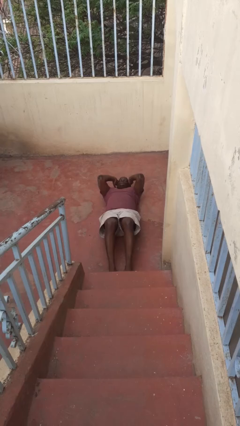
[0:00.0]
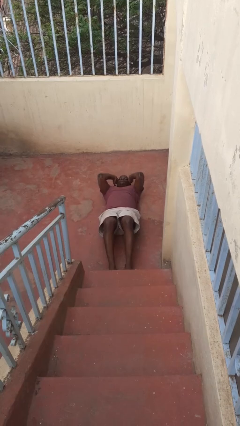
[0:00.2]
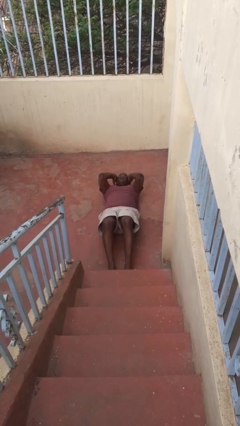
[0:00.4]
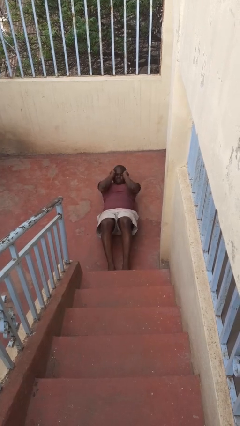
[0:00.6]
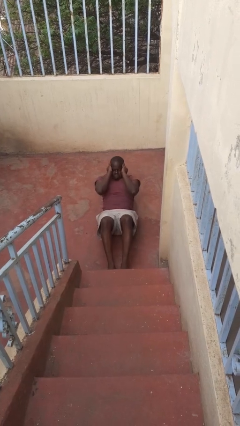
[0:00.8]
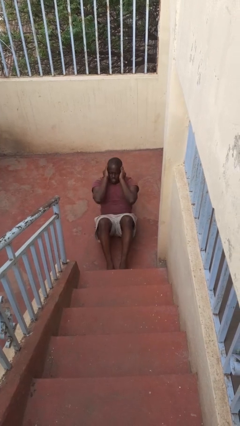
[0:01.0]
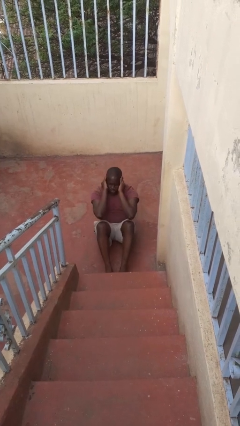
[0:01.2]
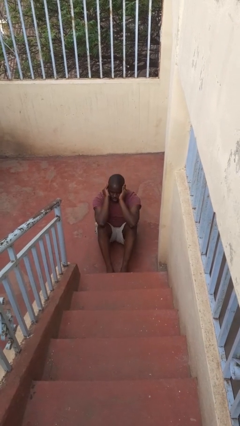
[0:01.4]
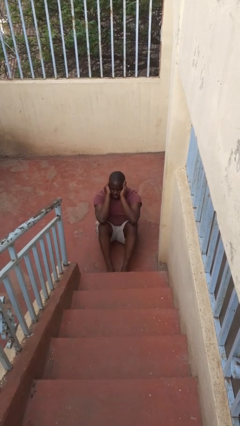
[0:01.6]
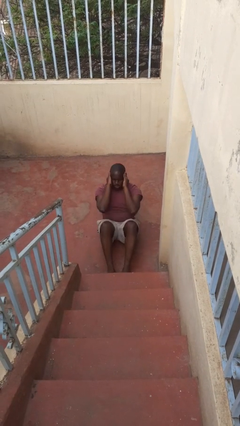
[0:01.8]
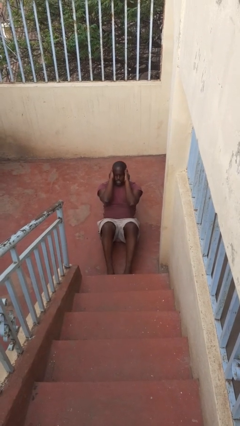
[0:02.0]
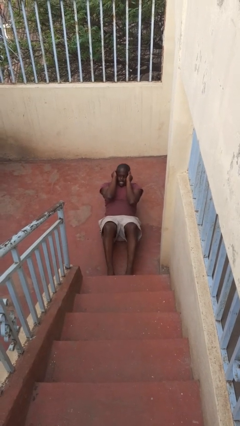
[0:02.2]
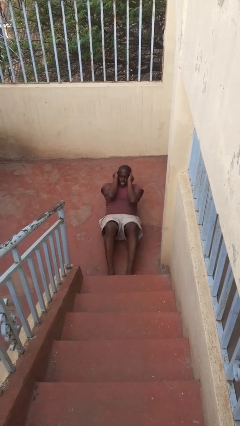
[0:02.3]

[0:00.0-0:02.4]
person exercises with situp

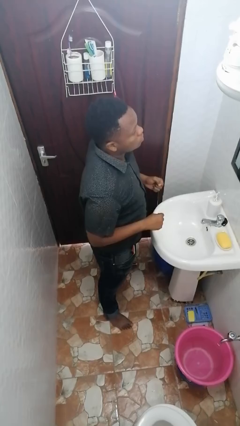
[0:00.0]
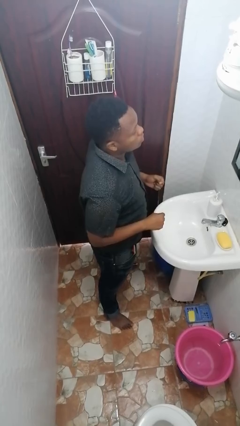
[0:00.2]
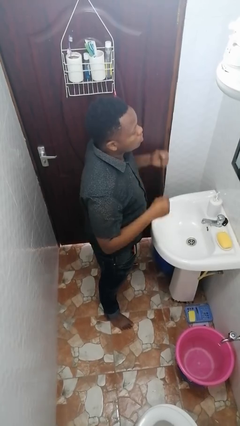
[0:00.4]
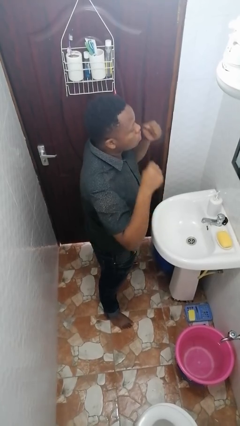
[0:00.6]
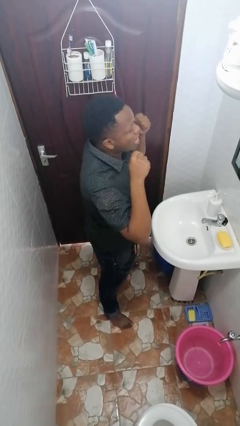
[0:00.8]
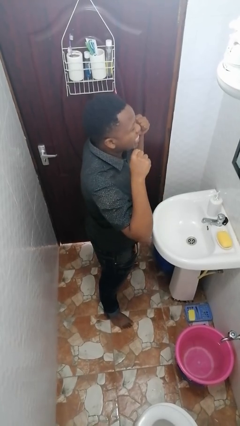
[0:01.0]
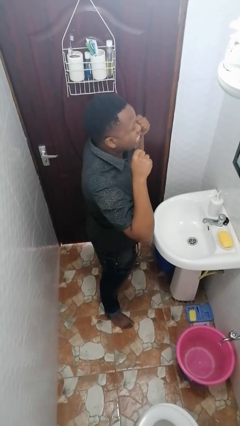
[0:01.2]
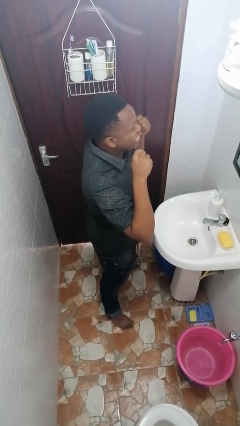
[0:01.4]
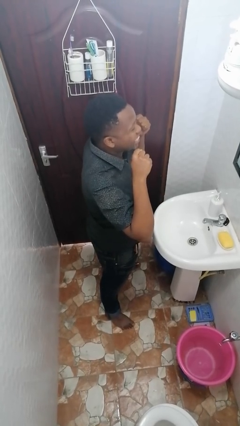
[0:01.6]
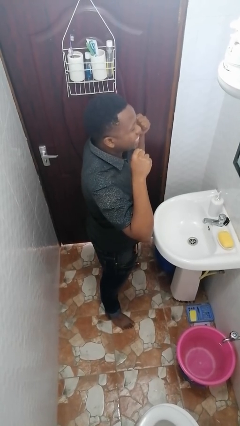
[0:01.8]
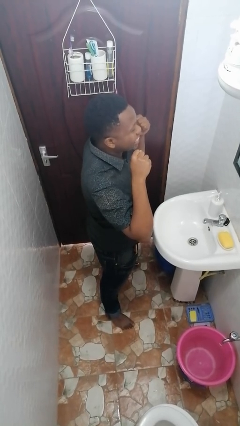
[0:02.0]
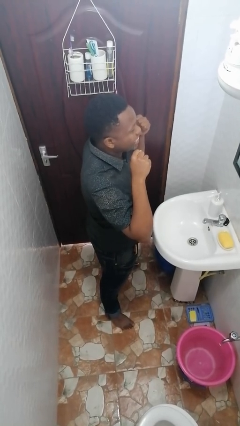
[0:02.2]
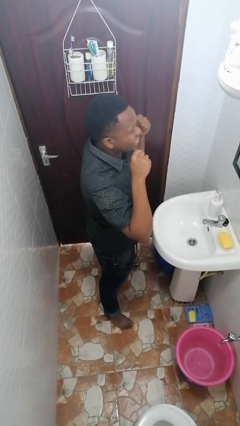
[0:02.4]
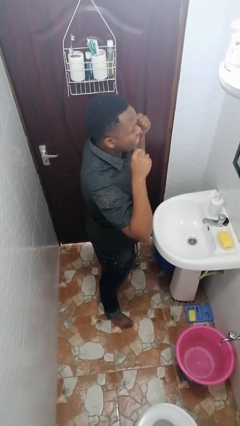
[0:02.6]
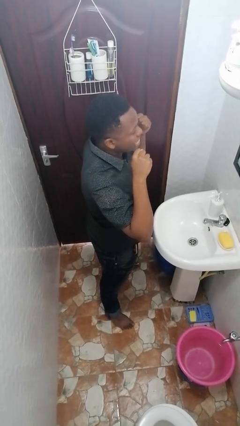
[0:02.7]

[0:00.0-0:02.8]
person flosses

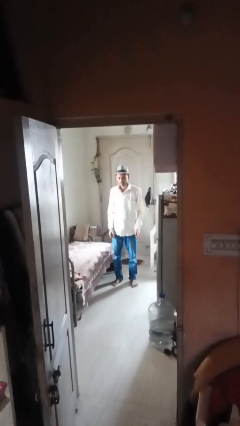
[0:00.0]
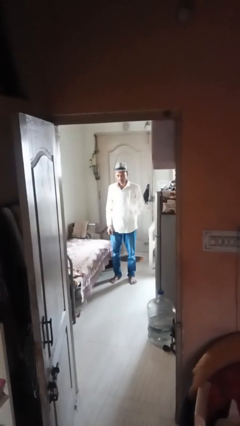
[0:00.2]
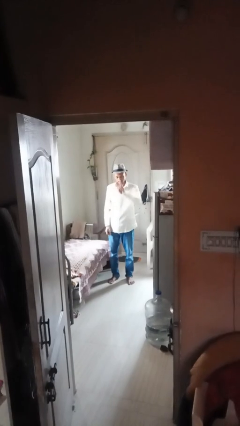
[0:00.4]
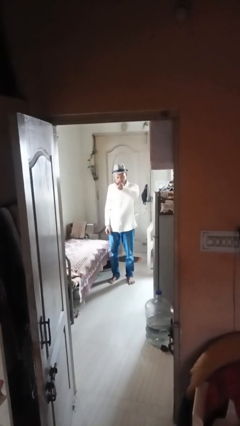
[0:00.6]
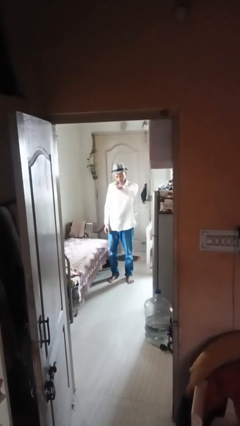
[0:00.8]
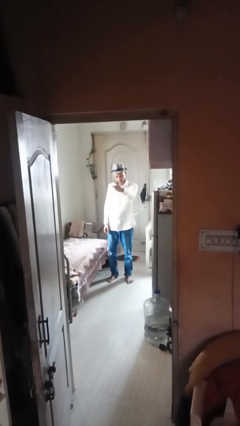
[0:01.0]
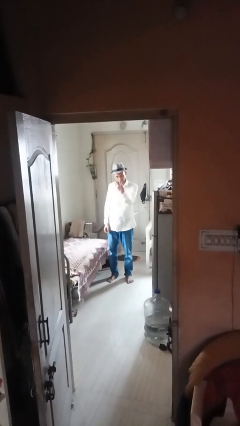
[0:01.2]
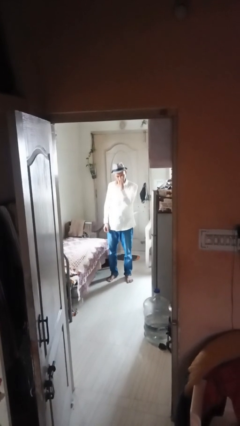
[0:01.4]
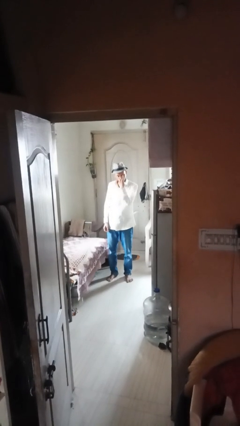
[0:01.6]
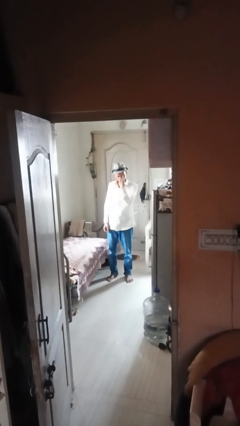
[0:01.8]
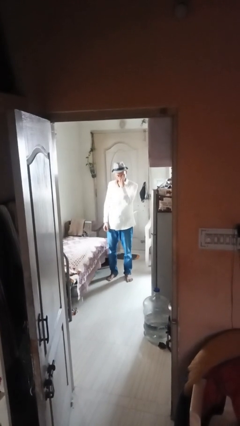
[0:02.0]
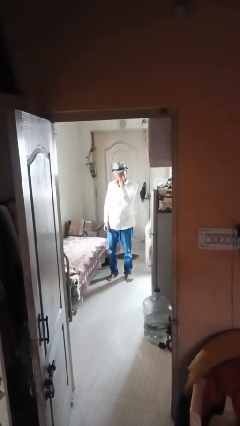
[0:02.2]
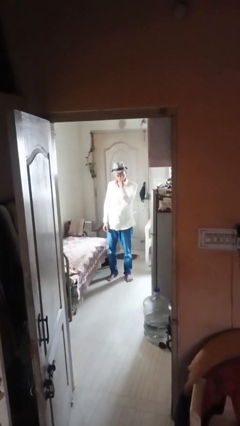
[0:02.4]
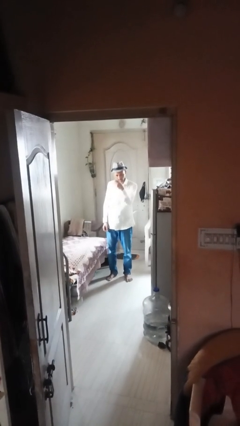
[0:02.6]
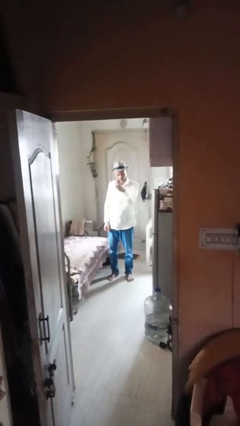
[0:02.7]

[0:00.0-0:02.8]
person gestures watch closely

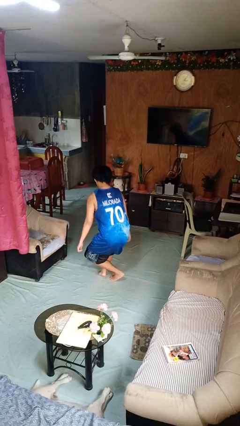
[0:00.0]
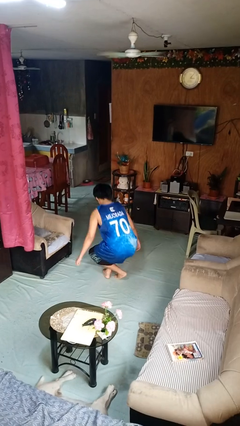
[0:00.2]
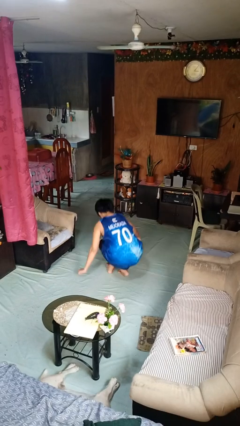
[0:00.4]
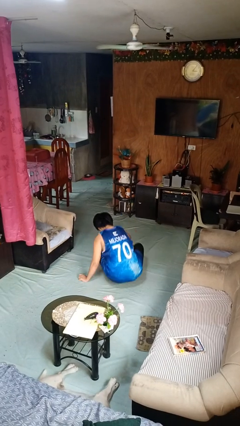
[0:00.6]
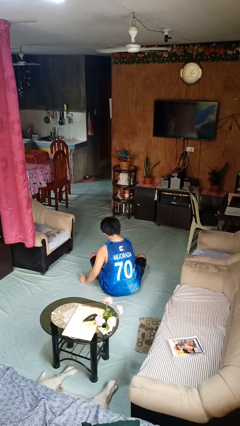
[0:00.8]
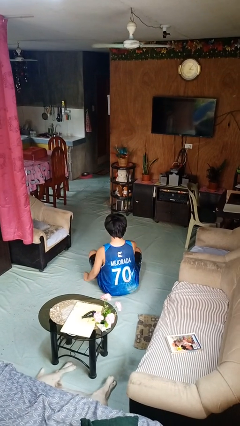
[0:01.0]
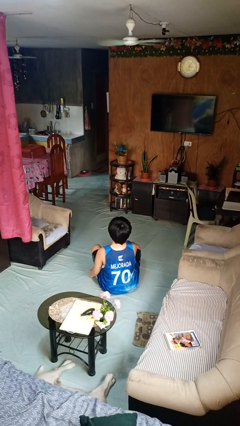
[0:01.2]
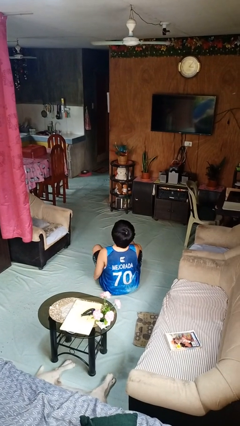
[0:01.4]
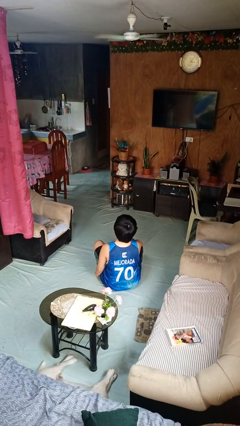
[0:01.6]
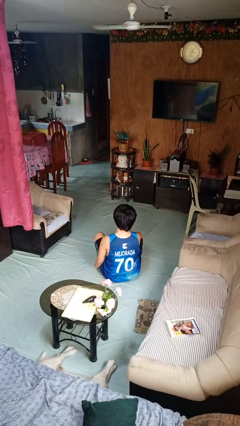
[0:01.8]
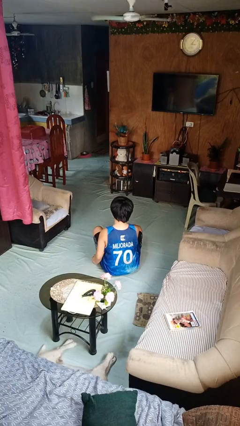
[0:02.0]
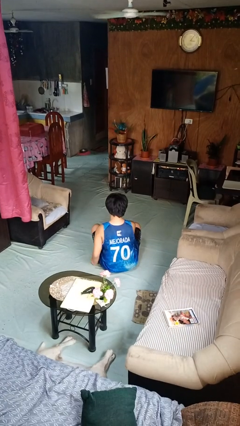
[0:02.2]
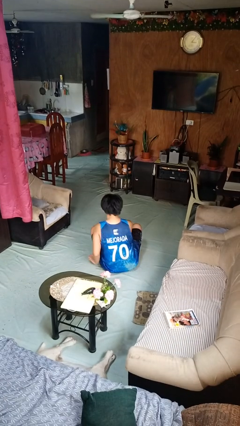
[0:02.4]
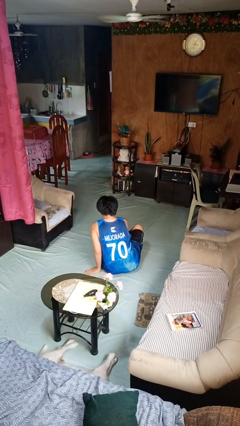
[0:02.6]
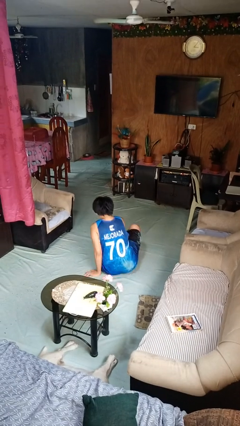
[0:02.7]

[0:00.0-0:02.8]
person sits crisscross

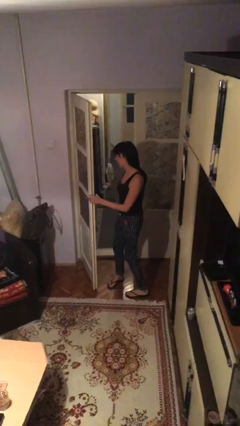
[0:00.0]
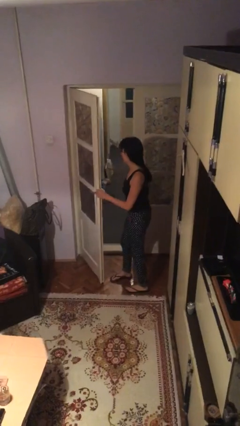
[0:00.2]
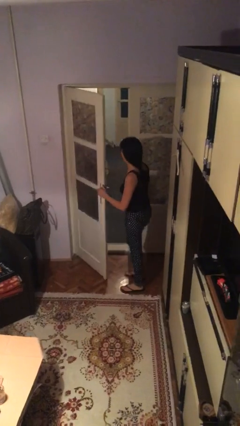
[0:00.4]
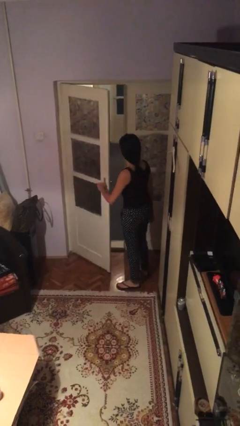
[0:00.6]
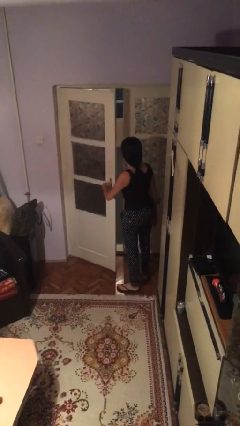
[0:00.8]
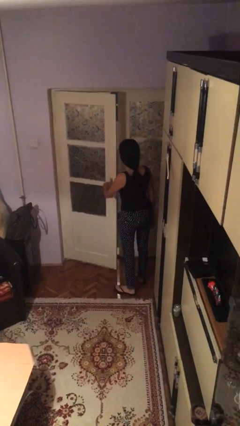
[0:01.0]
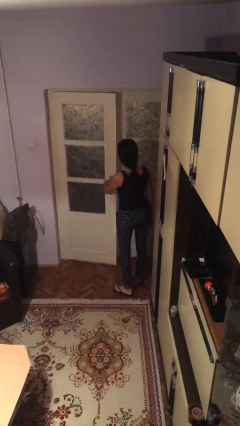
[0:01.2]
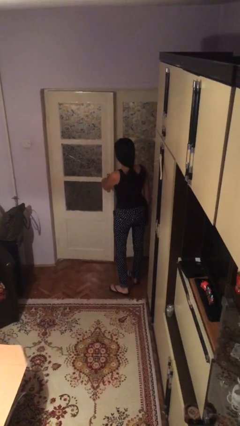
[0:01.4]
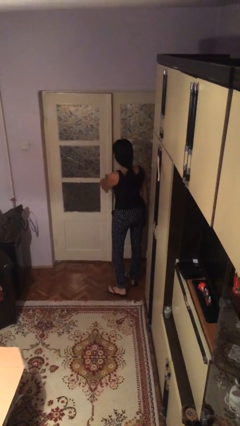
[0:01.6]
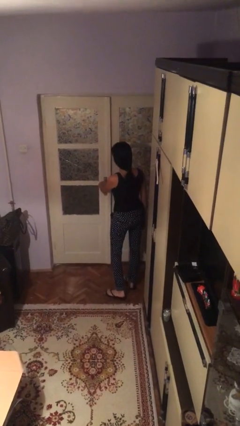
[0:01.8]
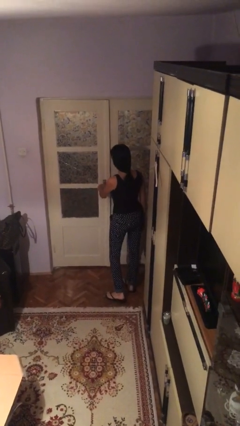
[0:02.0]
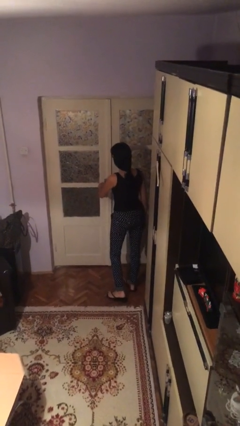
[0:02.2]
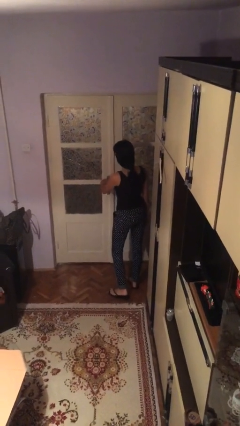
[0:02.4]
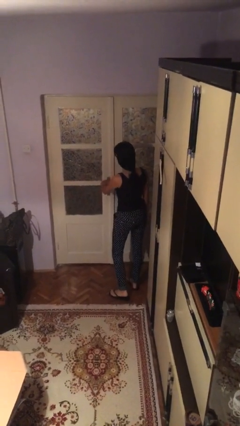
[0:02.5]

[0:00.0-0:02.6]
person closes facility door

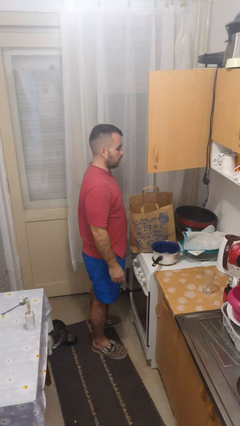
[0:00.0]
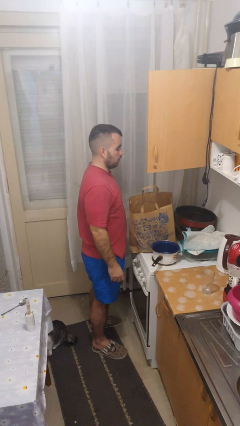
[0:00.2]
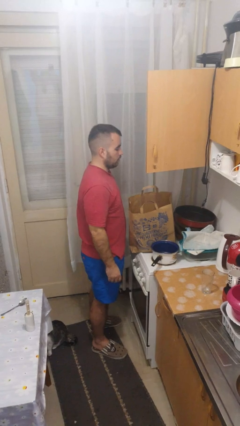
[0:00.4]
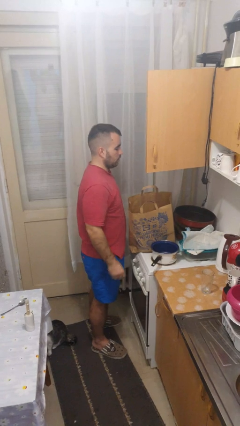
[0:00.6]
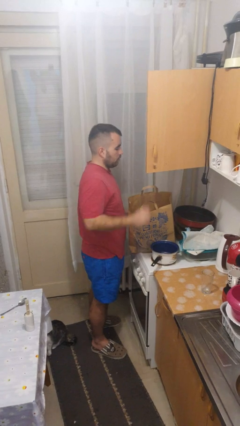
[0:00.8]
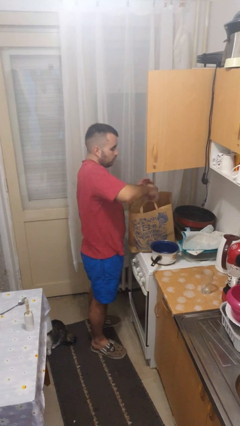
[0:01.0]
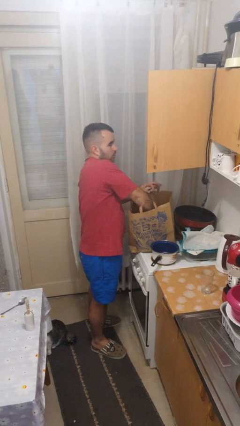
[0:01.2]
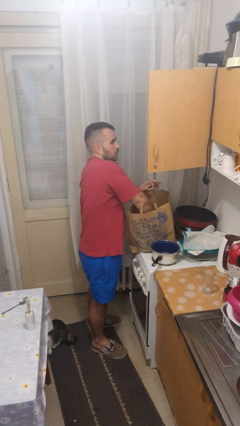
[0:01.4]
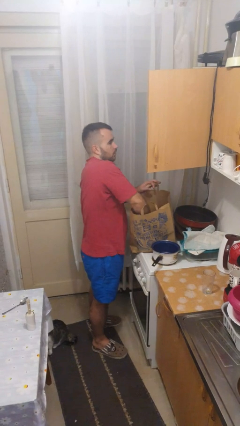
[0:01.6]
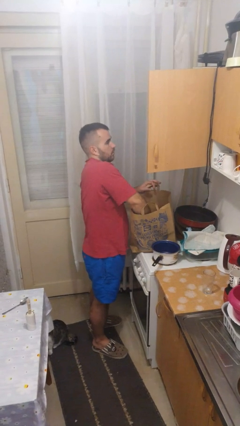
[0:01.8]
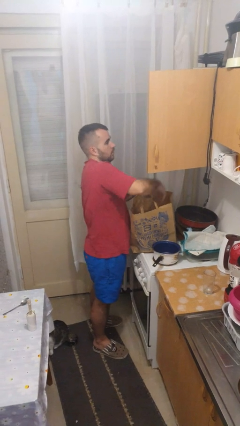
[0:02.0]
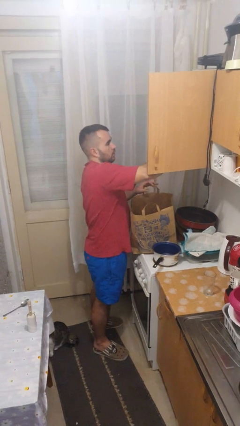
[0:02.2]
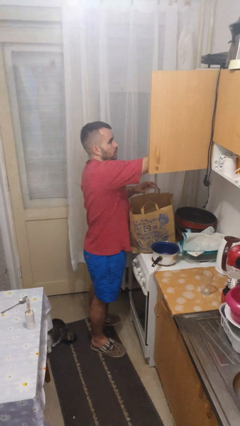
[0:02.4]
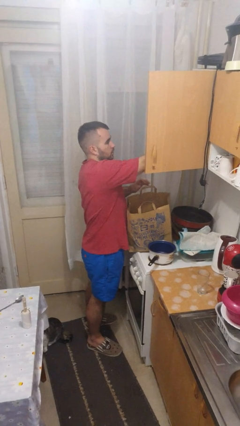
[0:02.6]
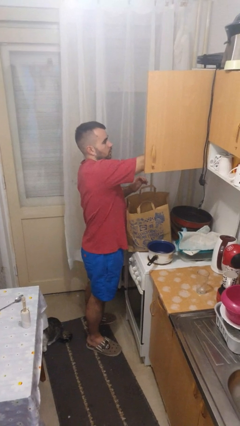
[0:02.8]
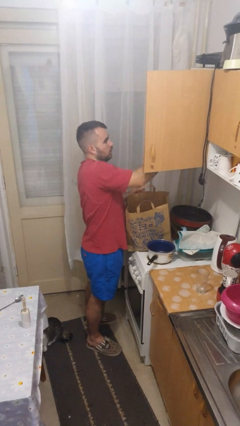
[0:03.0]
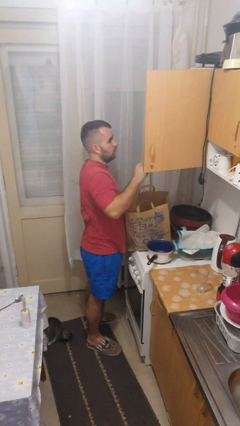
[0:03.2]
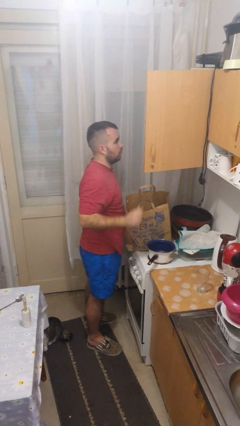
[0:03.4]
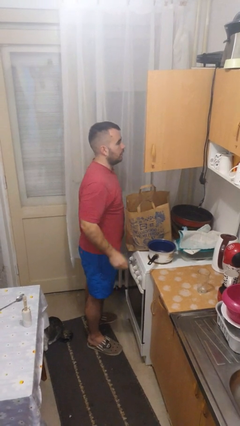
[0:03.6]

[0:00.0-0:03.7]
person loads groceries into cabinet

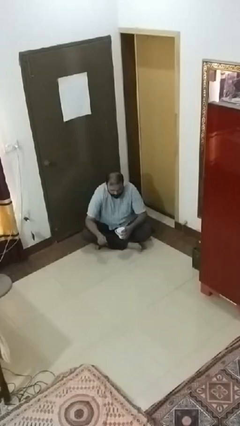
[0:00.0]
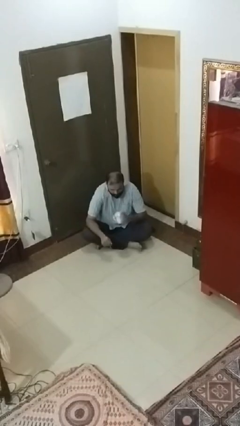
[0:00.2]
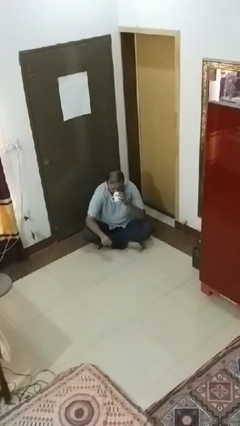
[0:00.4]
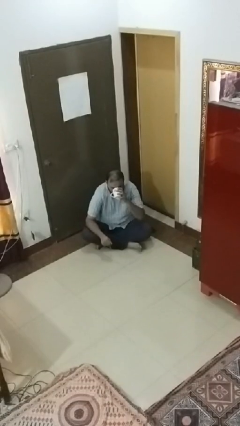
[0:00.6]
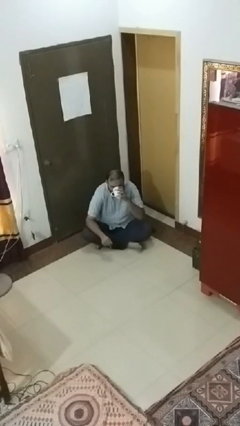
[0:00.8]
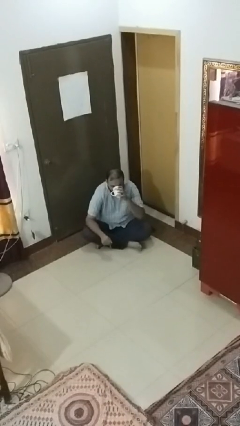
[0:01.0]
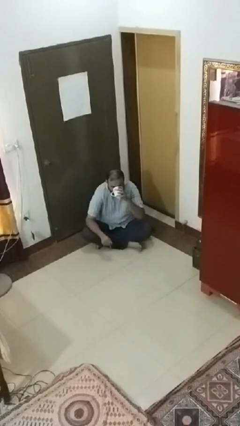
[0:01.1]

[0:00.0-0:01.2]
person drinks from mug
